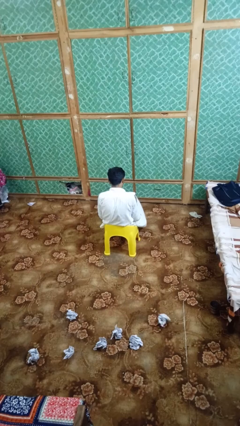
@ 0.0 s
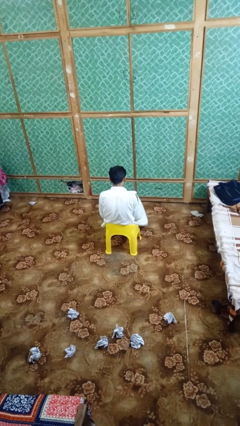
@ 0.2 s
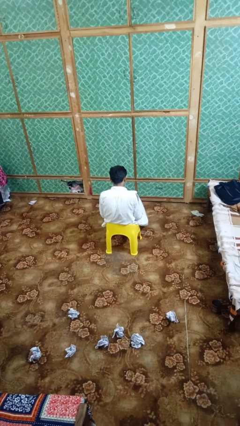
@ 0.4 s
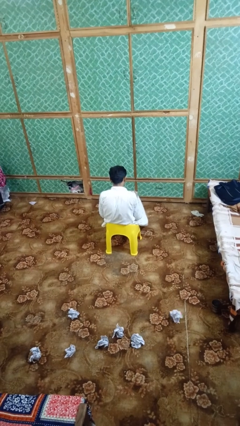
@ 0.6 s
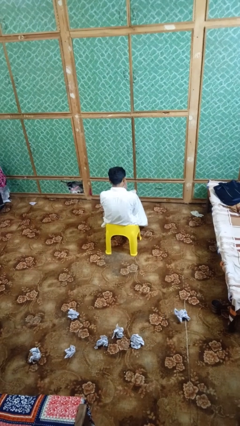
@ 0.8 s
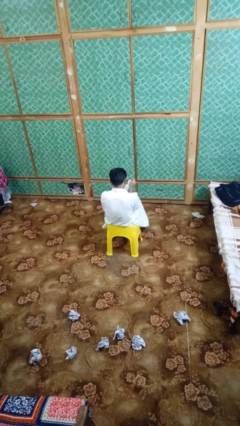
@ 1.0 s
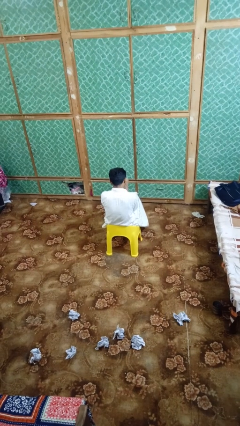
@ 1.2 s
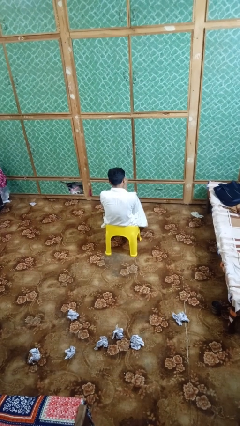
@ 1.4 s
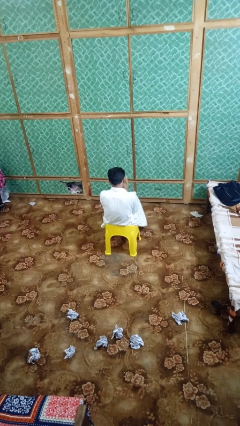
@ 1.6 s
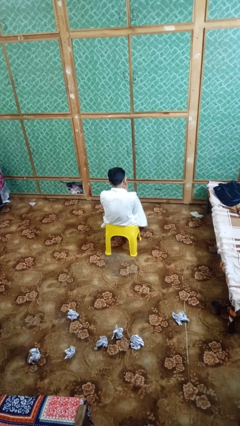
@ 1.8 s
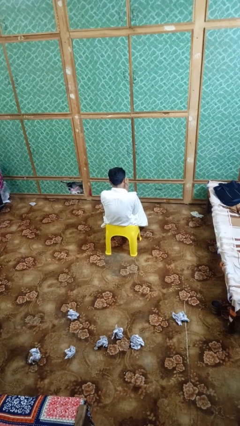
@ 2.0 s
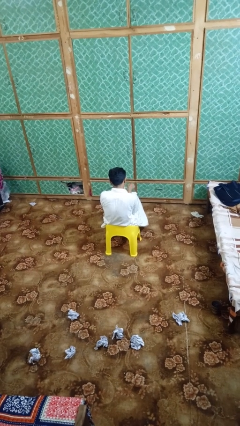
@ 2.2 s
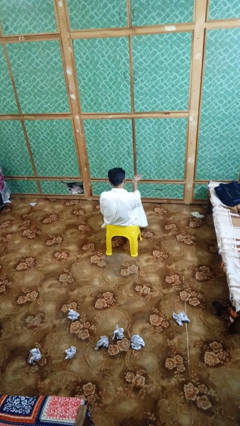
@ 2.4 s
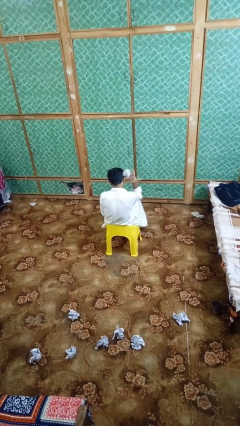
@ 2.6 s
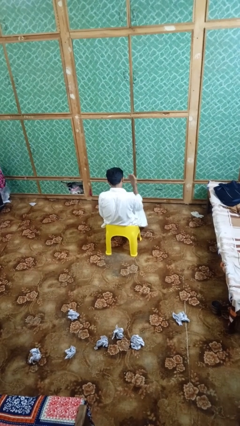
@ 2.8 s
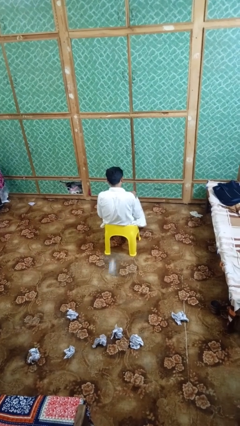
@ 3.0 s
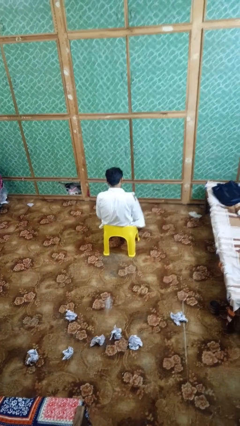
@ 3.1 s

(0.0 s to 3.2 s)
person crumples paper

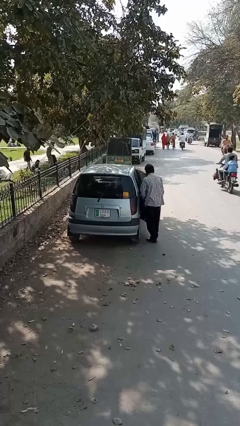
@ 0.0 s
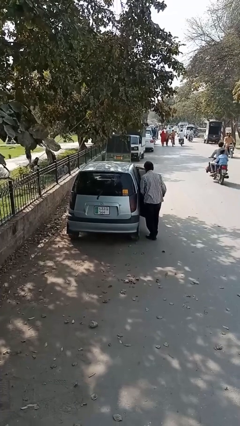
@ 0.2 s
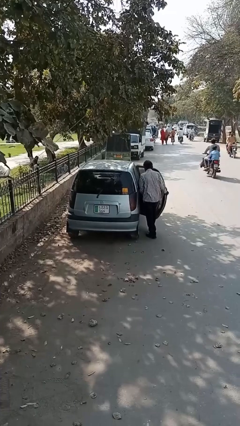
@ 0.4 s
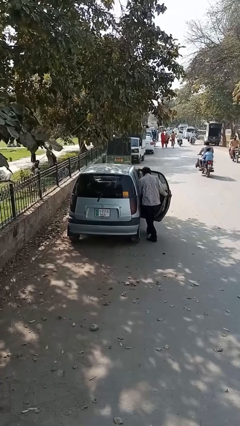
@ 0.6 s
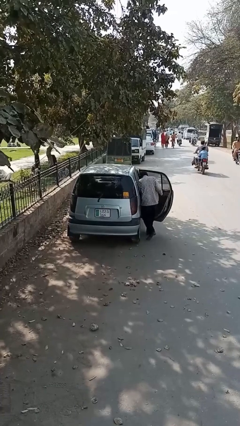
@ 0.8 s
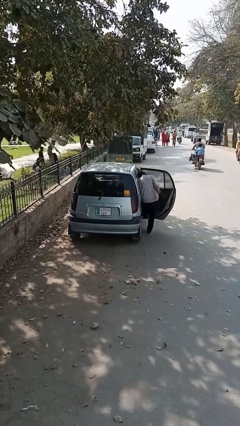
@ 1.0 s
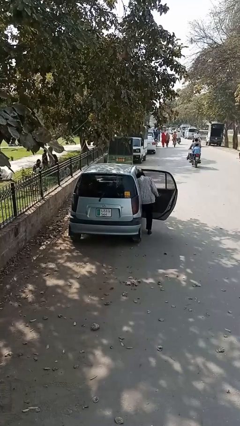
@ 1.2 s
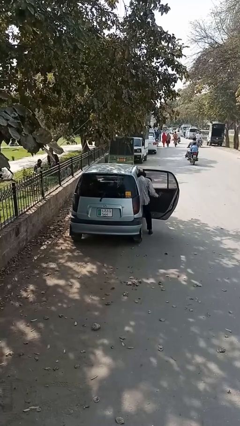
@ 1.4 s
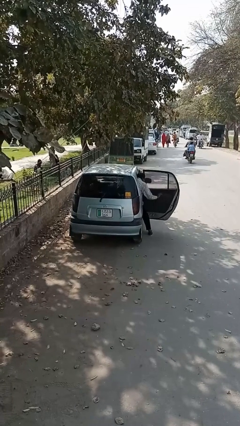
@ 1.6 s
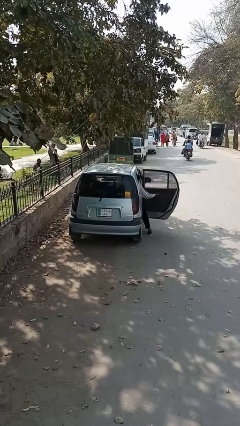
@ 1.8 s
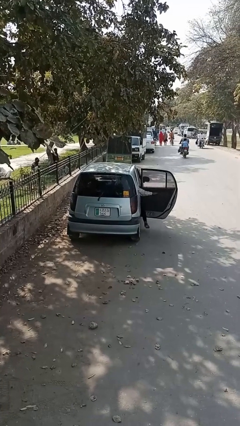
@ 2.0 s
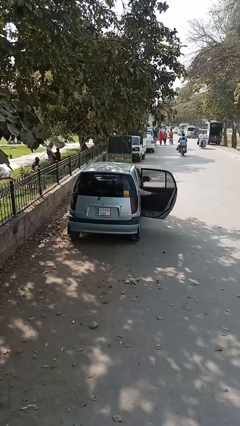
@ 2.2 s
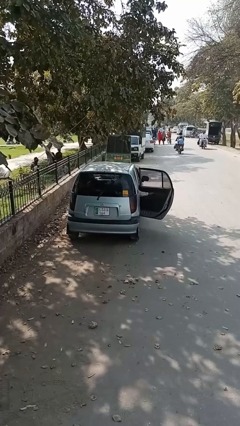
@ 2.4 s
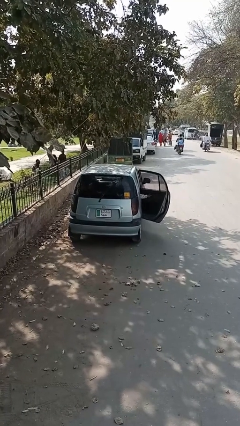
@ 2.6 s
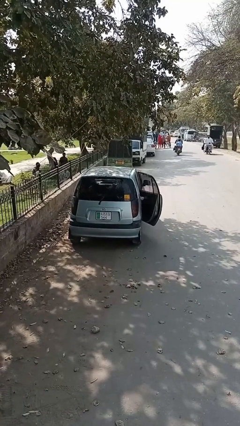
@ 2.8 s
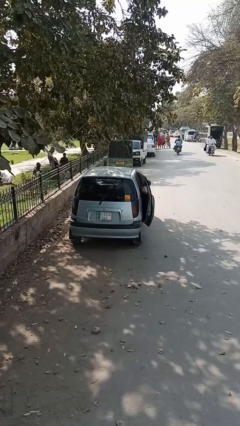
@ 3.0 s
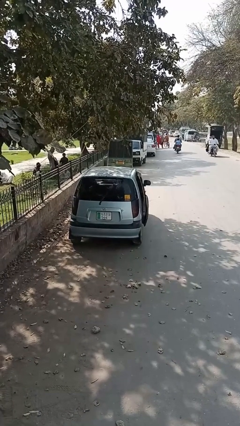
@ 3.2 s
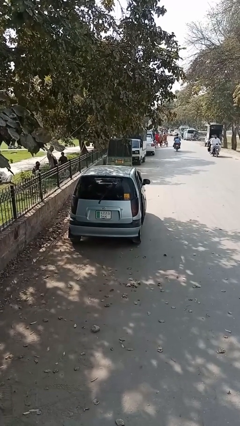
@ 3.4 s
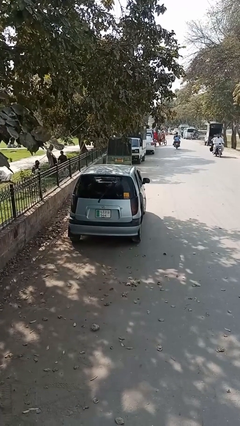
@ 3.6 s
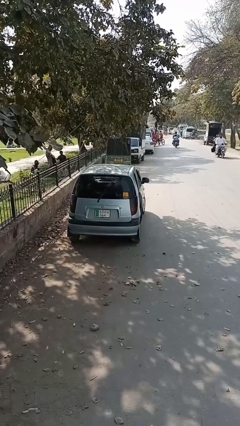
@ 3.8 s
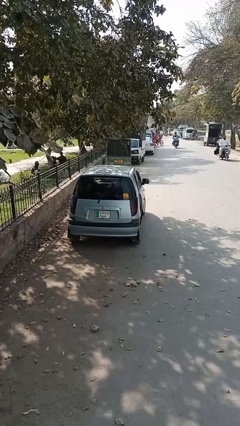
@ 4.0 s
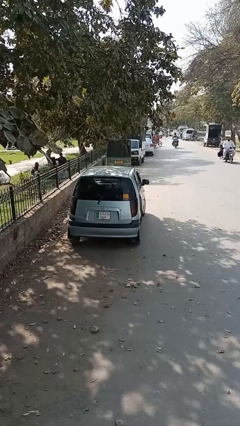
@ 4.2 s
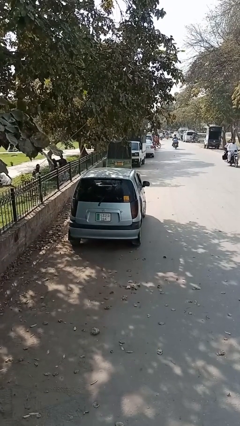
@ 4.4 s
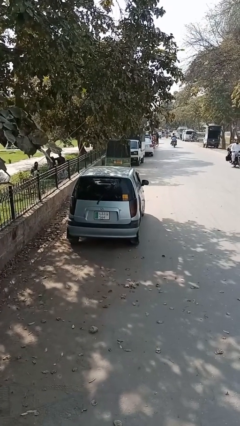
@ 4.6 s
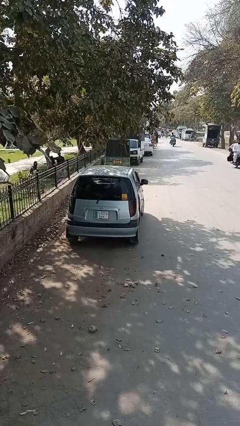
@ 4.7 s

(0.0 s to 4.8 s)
car picks up person

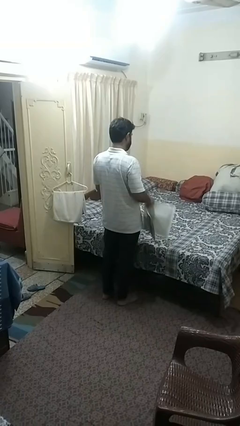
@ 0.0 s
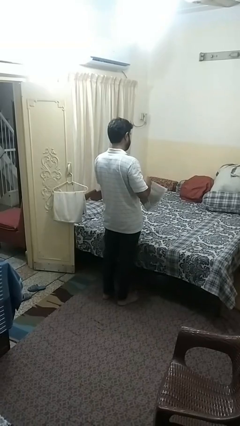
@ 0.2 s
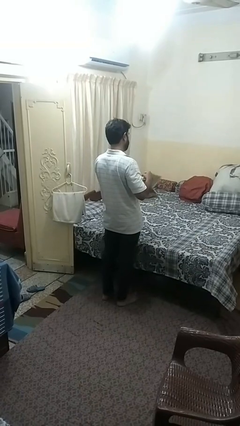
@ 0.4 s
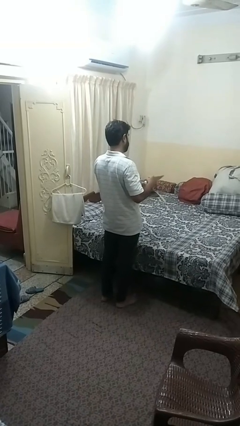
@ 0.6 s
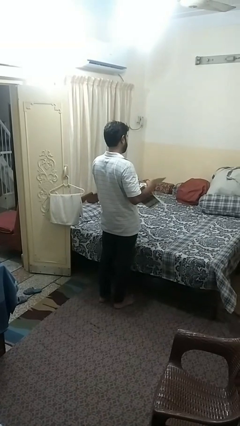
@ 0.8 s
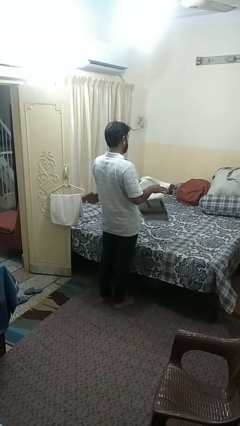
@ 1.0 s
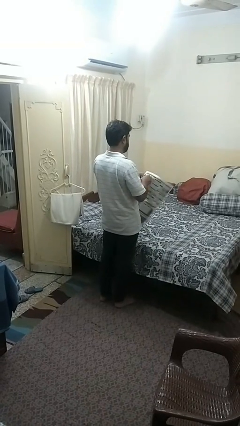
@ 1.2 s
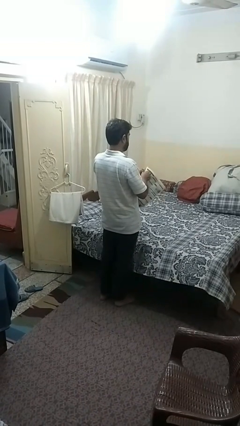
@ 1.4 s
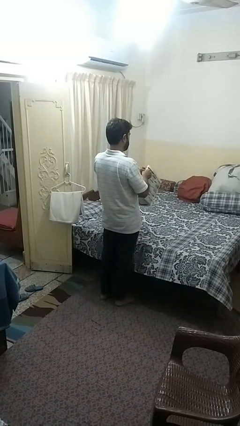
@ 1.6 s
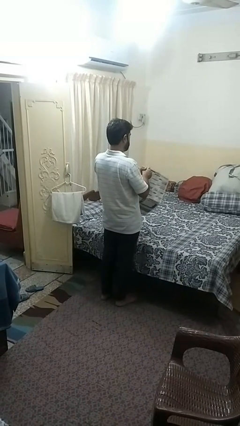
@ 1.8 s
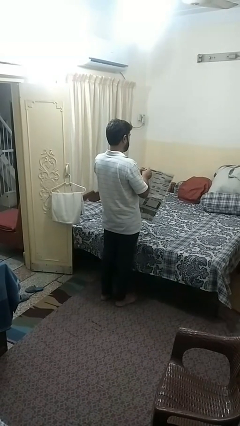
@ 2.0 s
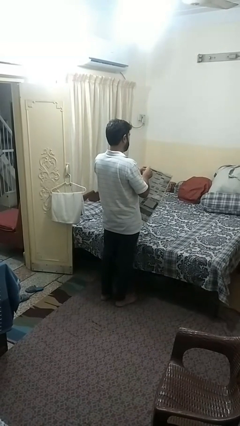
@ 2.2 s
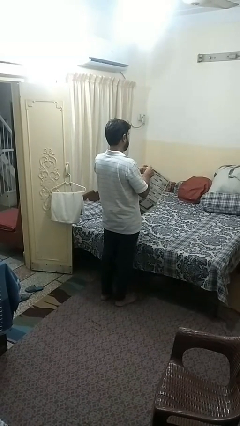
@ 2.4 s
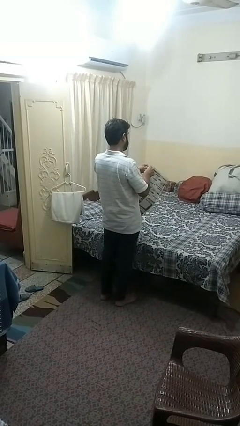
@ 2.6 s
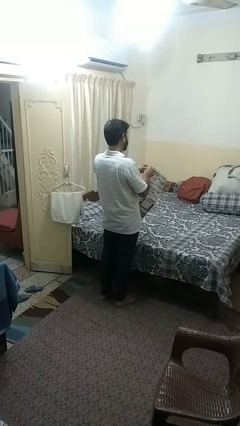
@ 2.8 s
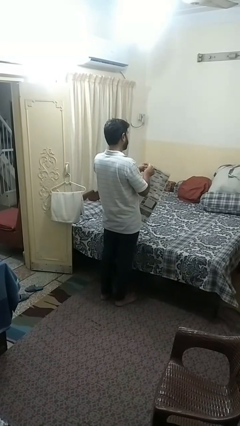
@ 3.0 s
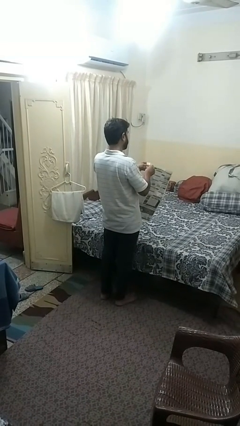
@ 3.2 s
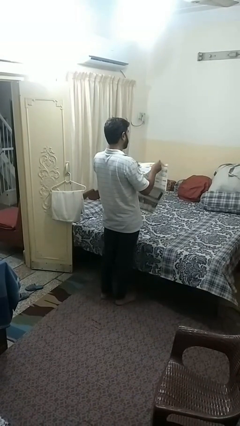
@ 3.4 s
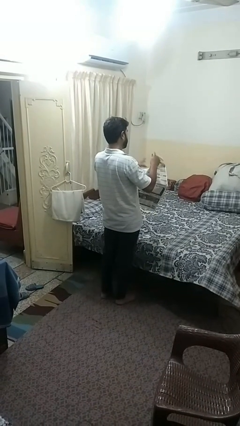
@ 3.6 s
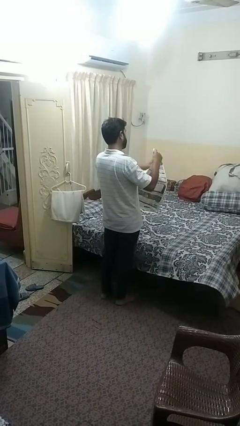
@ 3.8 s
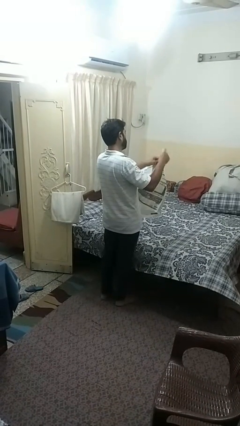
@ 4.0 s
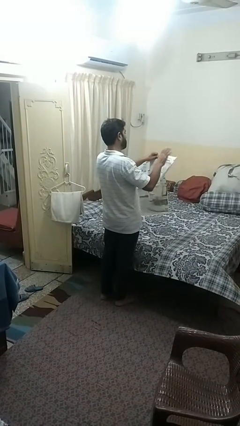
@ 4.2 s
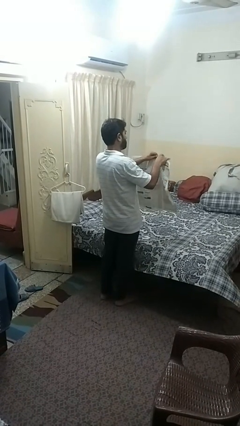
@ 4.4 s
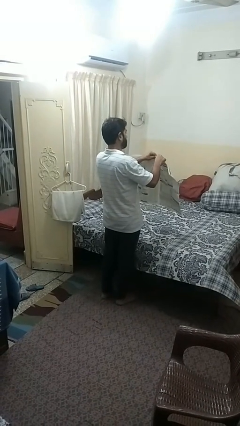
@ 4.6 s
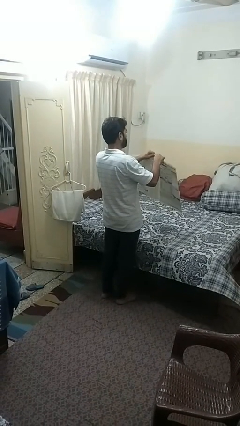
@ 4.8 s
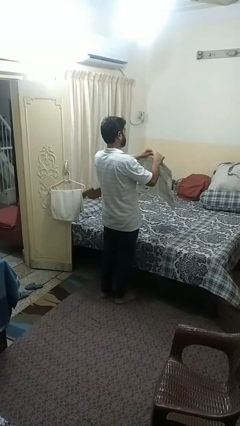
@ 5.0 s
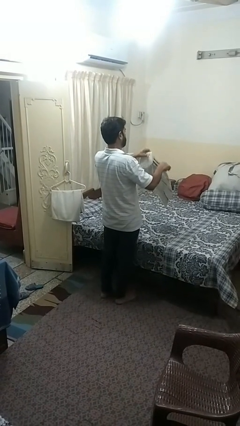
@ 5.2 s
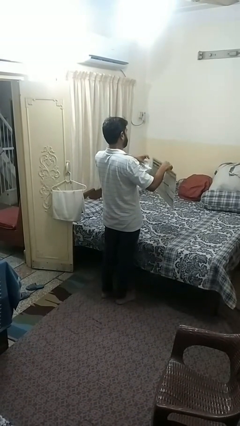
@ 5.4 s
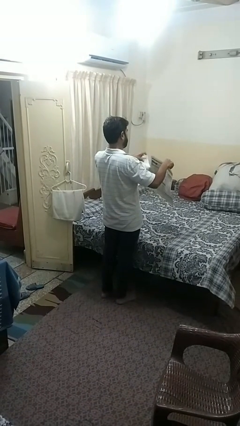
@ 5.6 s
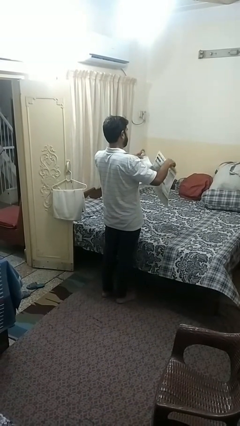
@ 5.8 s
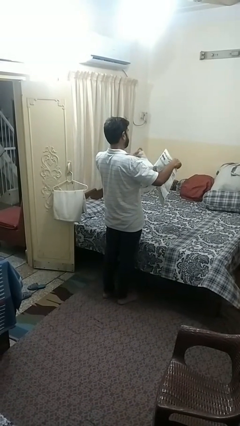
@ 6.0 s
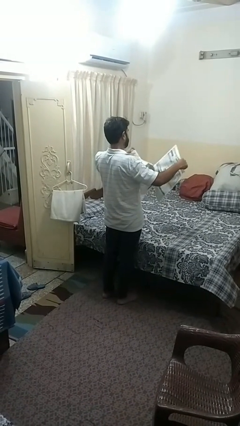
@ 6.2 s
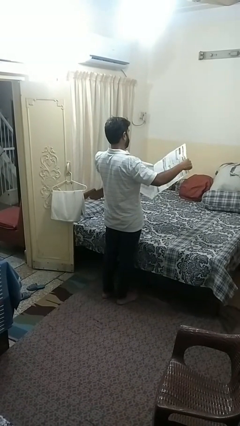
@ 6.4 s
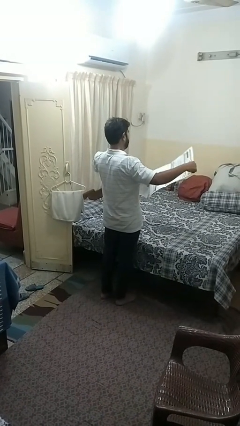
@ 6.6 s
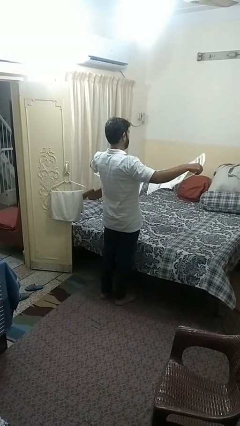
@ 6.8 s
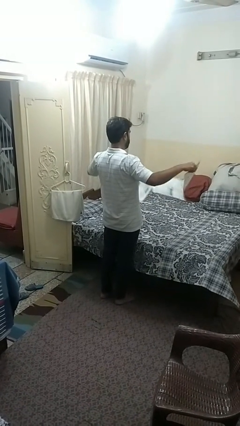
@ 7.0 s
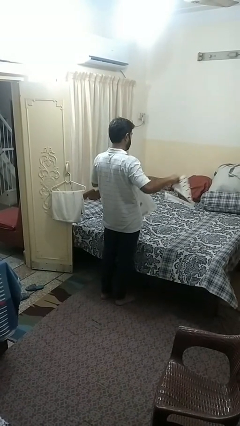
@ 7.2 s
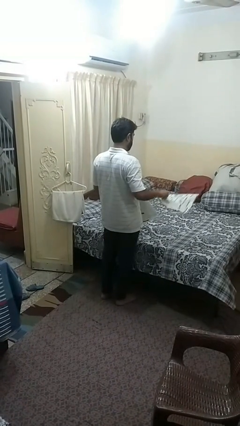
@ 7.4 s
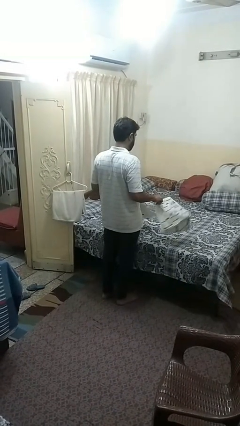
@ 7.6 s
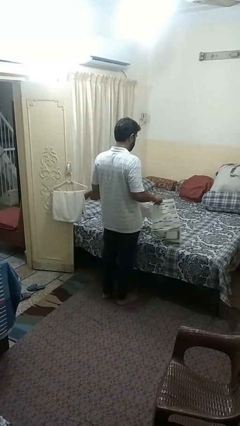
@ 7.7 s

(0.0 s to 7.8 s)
person tears paper

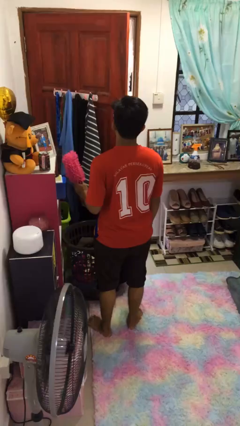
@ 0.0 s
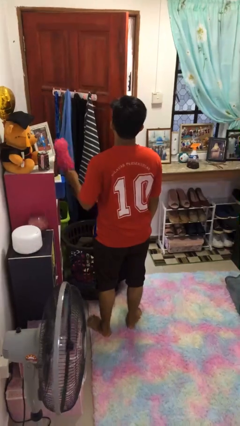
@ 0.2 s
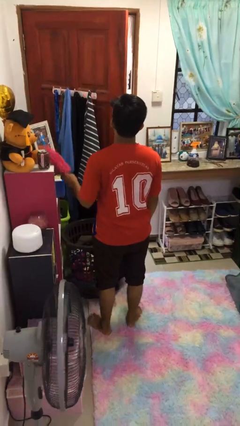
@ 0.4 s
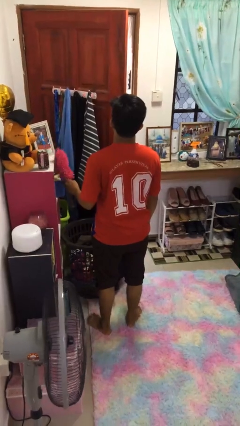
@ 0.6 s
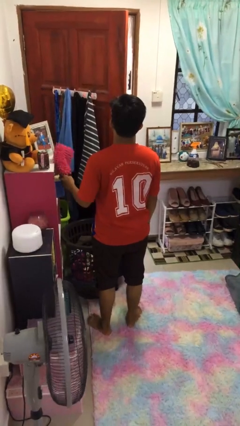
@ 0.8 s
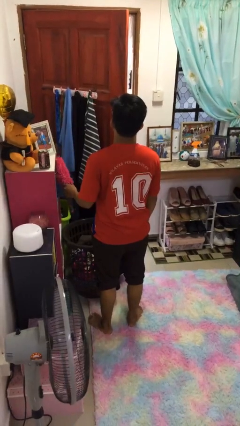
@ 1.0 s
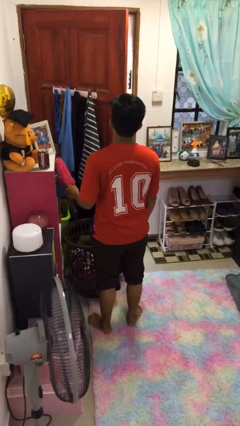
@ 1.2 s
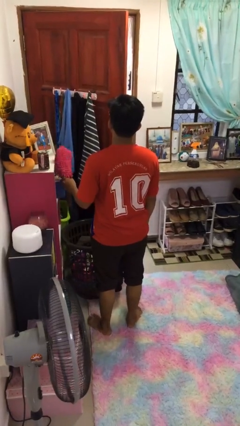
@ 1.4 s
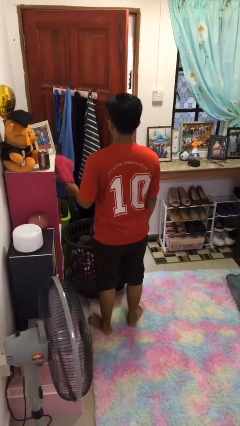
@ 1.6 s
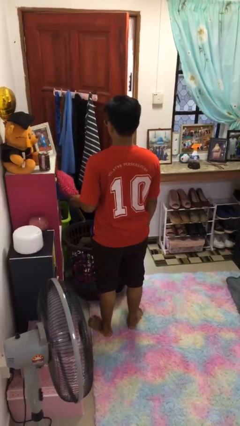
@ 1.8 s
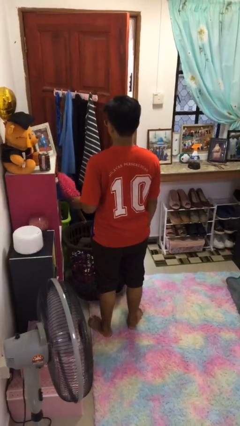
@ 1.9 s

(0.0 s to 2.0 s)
person dusts furniture
